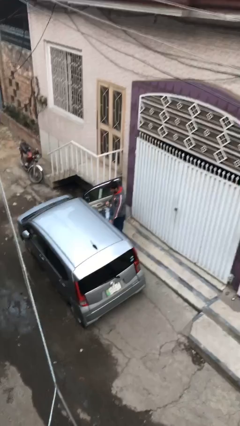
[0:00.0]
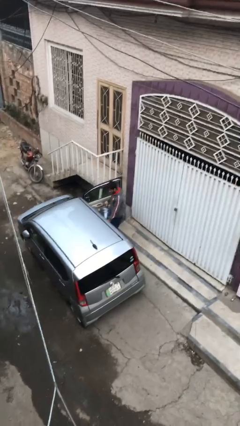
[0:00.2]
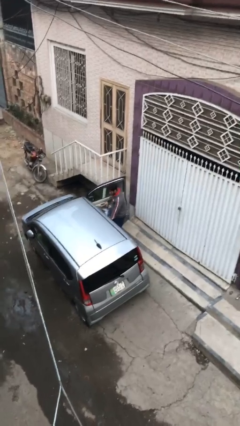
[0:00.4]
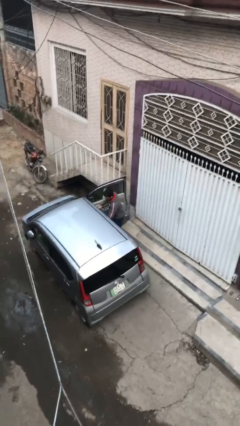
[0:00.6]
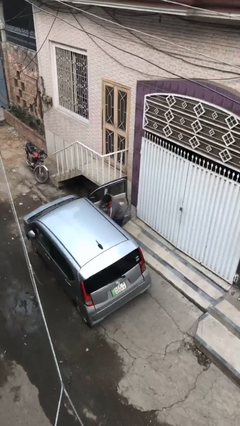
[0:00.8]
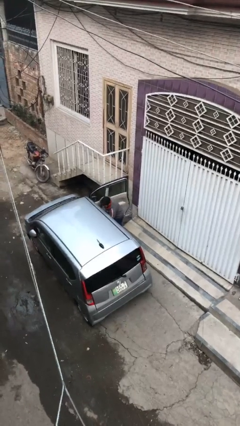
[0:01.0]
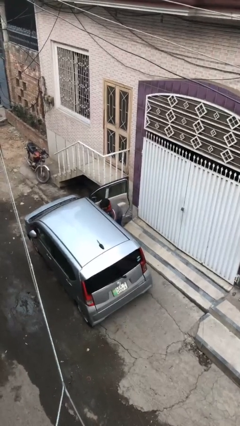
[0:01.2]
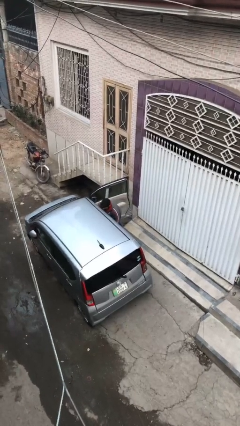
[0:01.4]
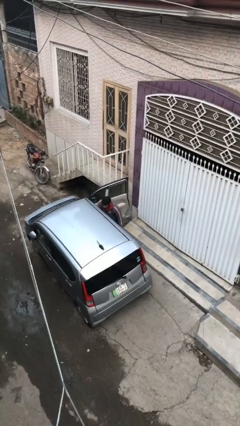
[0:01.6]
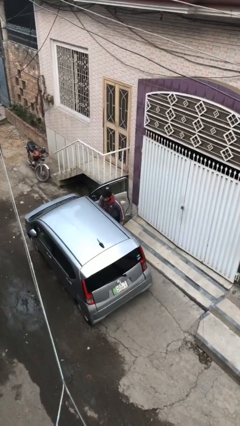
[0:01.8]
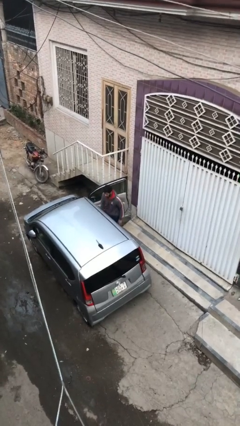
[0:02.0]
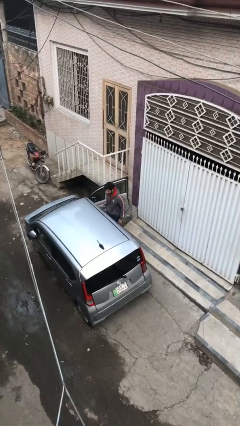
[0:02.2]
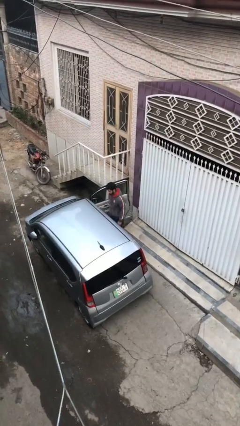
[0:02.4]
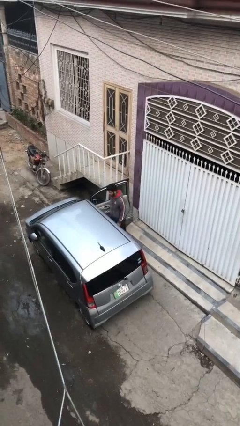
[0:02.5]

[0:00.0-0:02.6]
person loads car

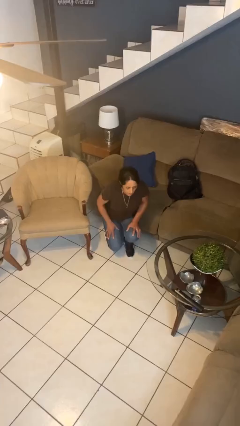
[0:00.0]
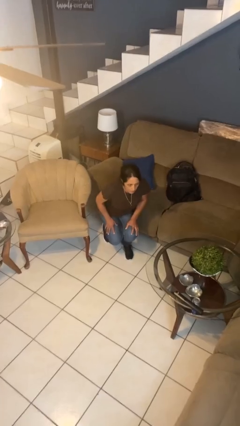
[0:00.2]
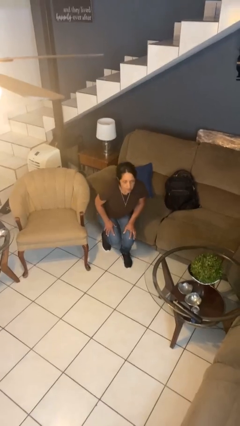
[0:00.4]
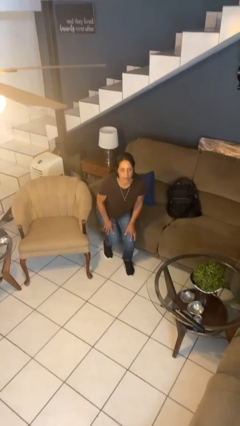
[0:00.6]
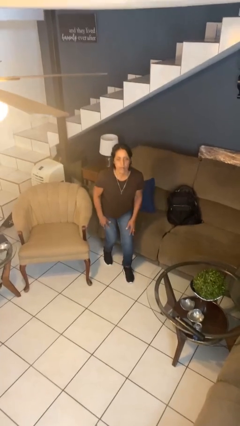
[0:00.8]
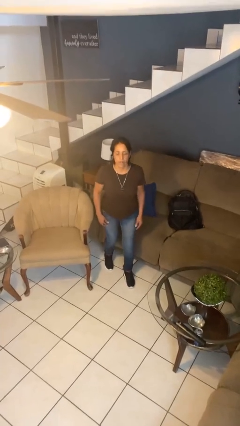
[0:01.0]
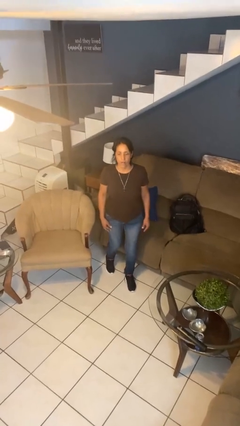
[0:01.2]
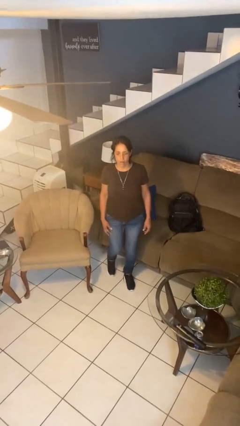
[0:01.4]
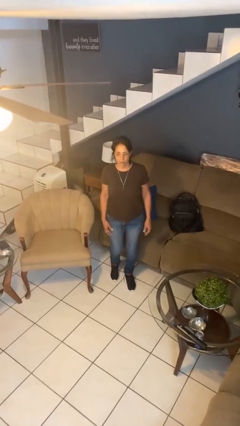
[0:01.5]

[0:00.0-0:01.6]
person stands up from floor

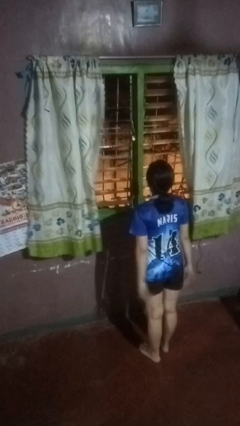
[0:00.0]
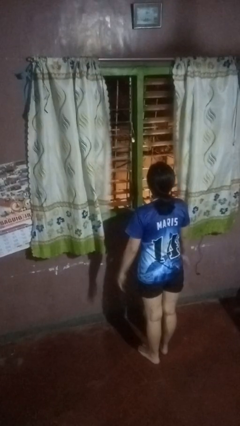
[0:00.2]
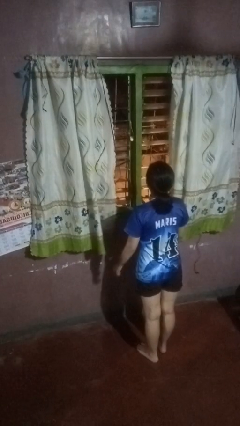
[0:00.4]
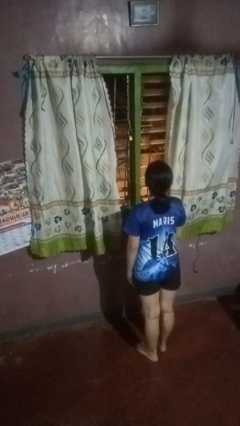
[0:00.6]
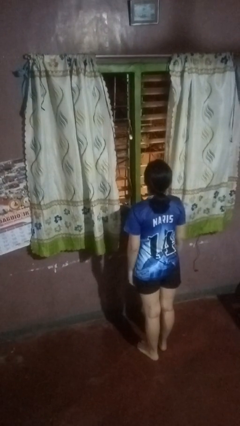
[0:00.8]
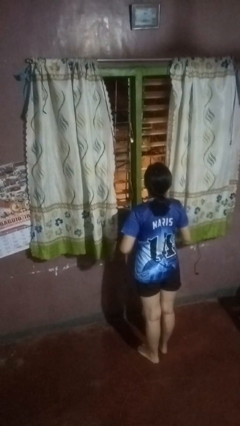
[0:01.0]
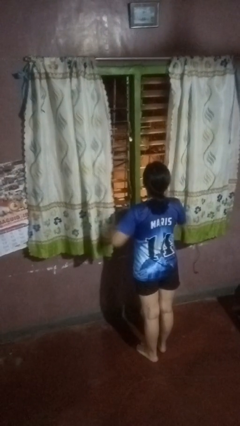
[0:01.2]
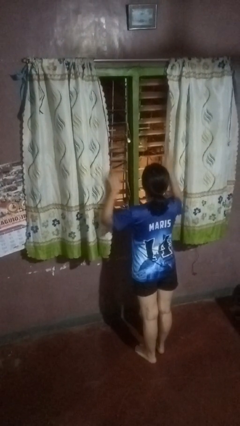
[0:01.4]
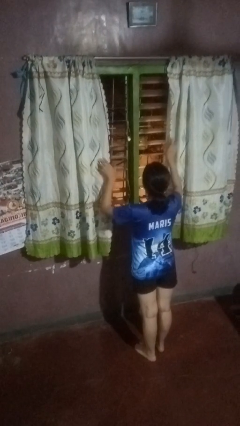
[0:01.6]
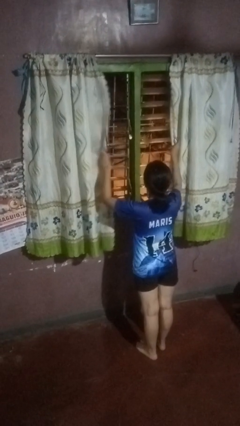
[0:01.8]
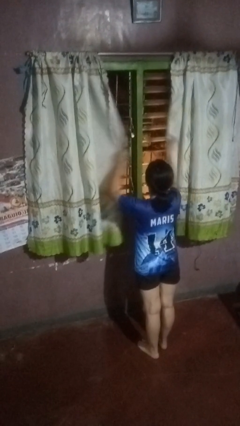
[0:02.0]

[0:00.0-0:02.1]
person closes curtains

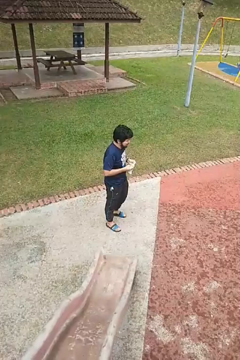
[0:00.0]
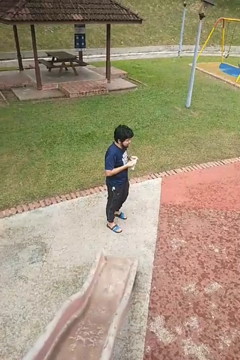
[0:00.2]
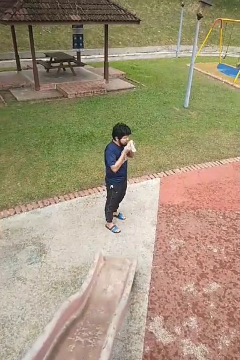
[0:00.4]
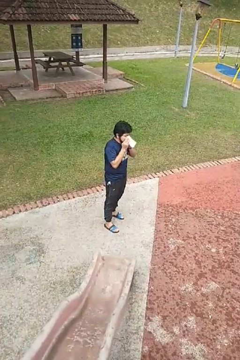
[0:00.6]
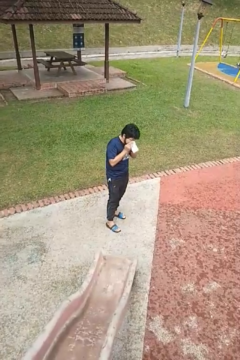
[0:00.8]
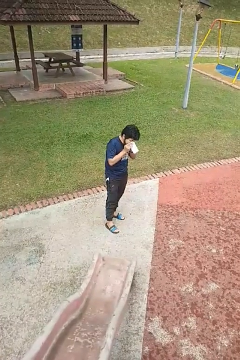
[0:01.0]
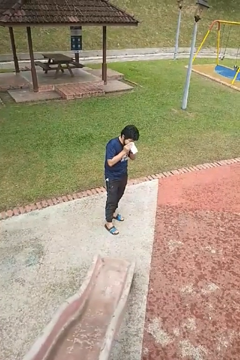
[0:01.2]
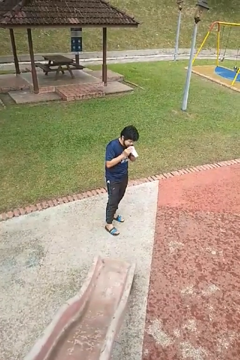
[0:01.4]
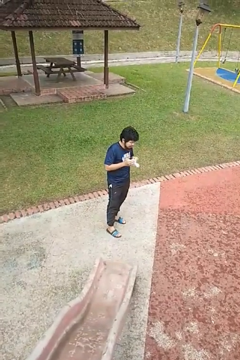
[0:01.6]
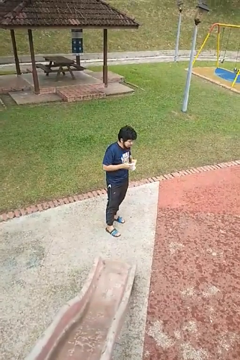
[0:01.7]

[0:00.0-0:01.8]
person blows nose

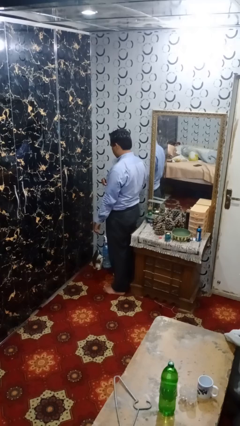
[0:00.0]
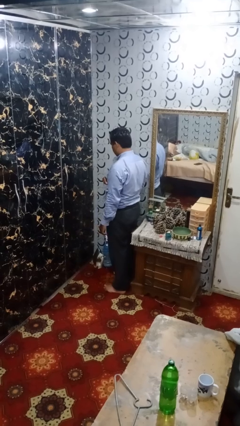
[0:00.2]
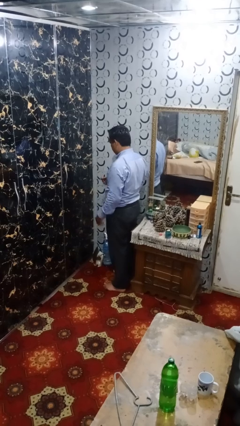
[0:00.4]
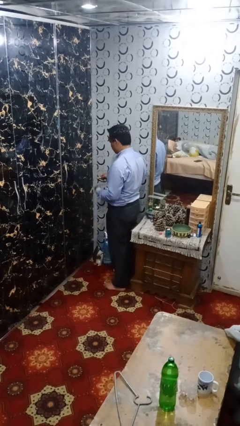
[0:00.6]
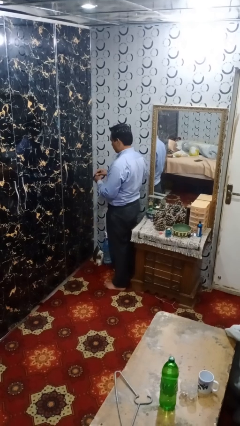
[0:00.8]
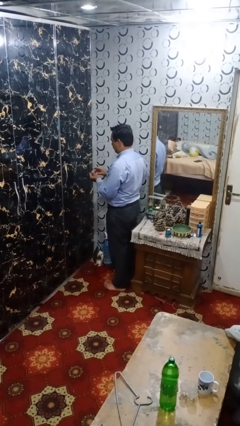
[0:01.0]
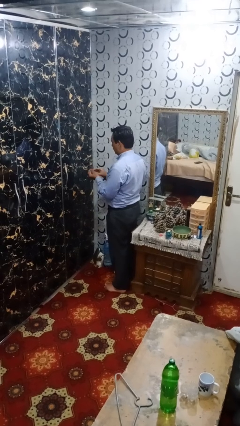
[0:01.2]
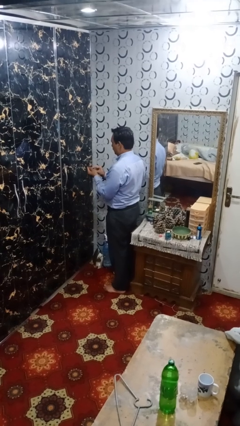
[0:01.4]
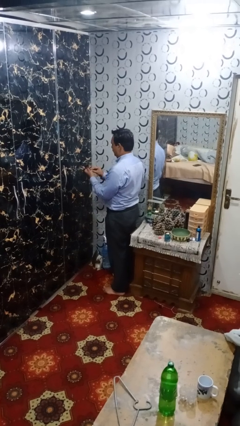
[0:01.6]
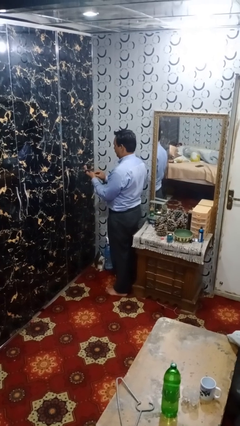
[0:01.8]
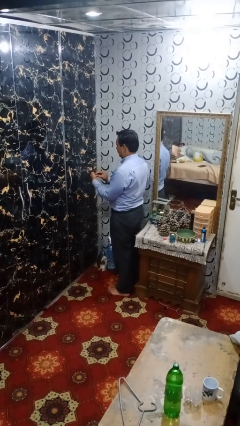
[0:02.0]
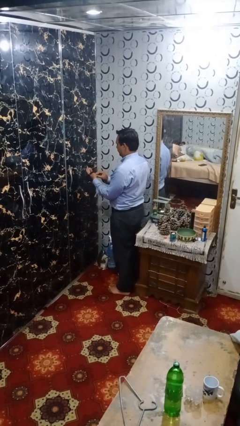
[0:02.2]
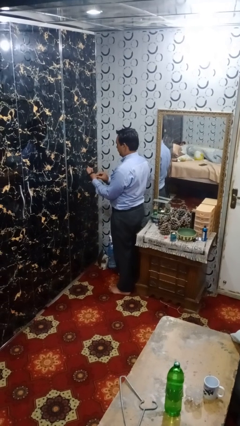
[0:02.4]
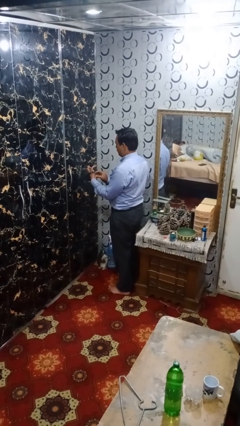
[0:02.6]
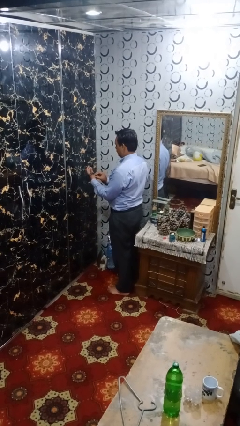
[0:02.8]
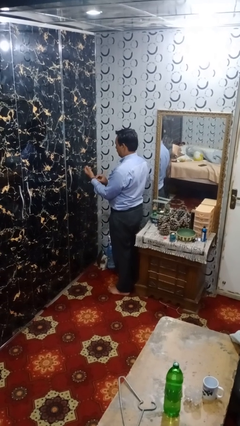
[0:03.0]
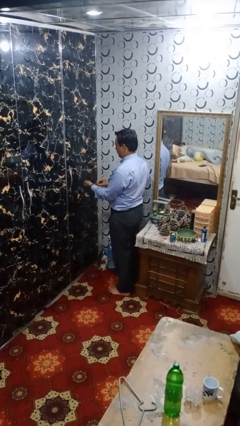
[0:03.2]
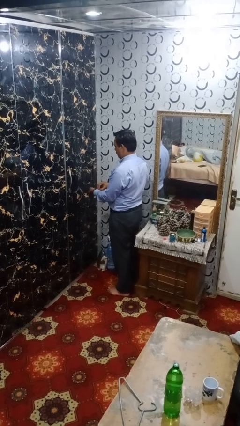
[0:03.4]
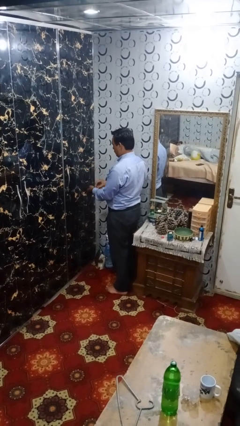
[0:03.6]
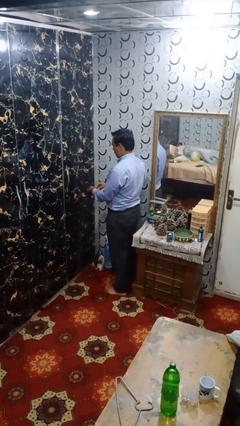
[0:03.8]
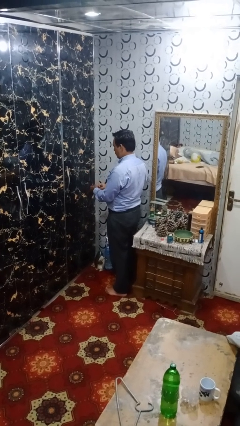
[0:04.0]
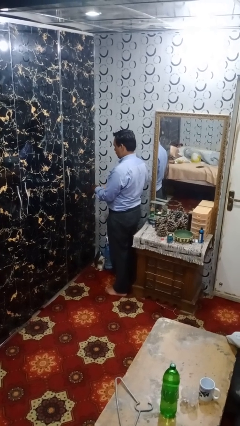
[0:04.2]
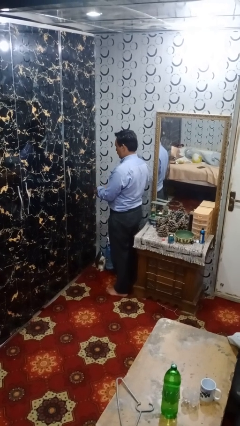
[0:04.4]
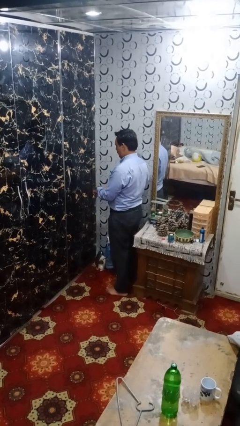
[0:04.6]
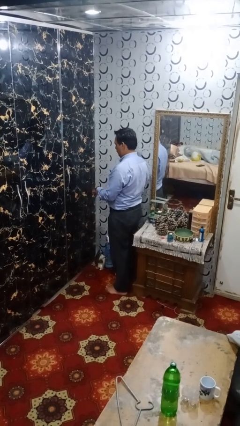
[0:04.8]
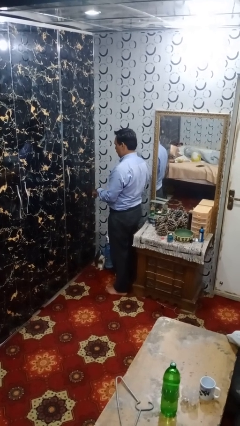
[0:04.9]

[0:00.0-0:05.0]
person puts on wristwatch

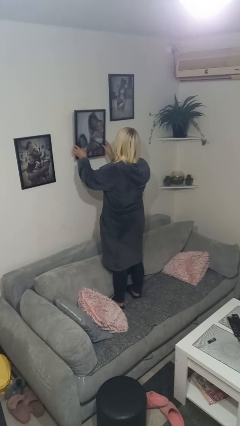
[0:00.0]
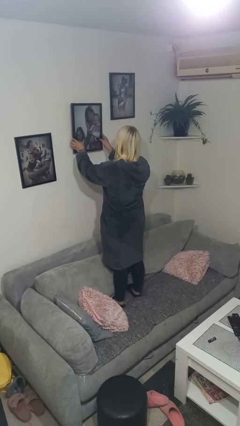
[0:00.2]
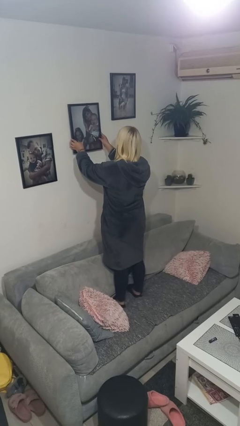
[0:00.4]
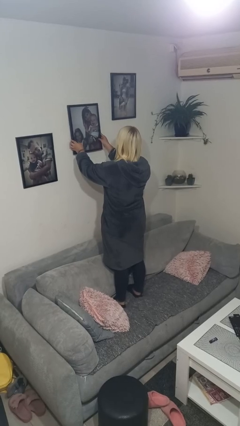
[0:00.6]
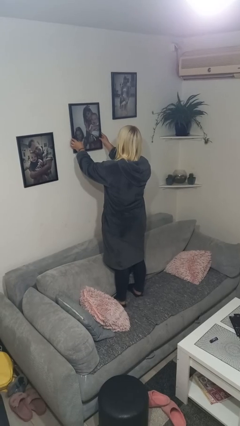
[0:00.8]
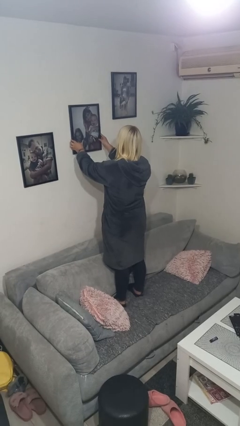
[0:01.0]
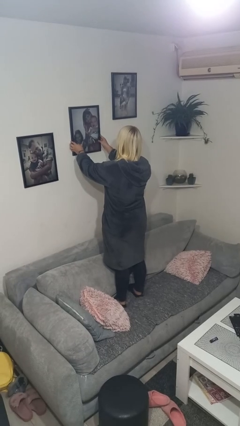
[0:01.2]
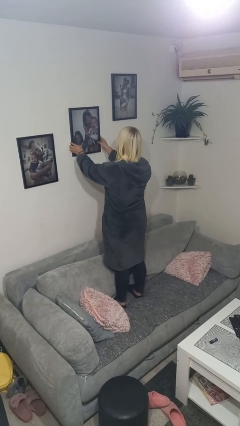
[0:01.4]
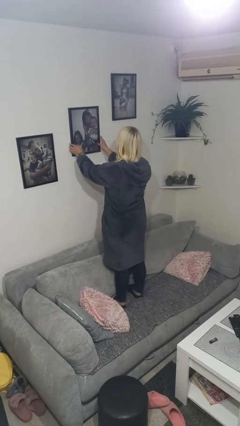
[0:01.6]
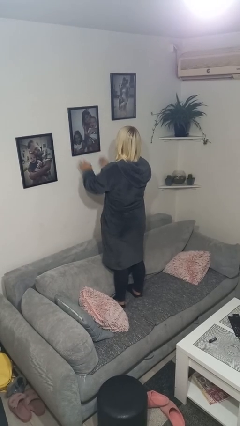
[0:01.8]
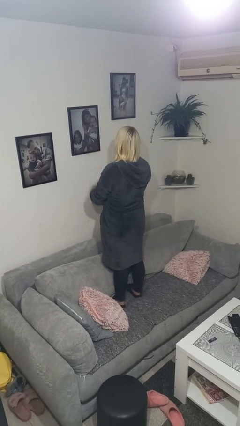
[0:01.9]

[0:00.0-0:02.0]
person puts up picture frame

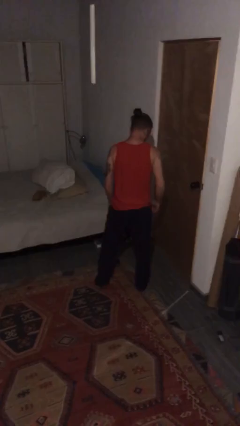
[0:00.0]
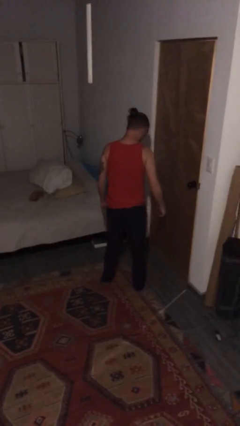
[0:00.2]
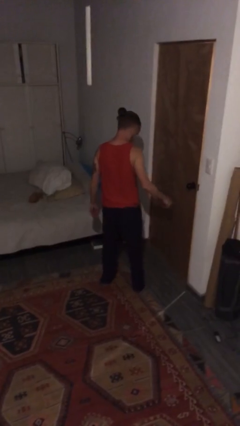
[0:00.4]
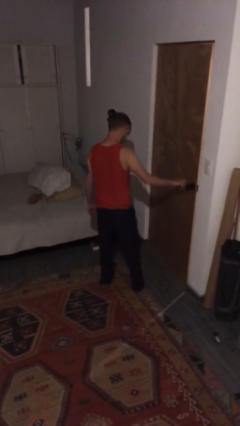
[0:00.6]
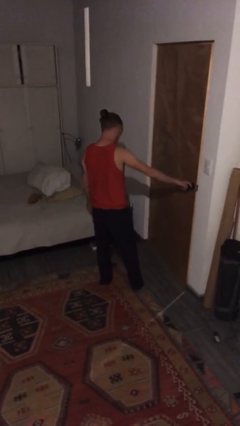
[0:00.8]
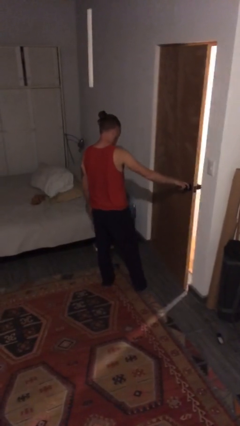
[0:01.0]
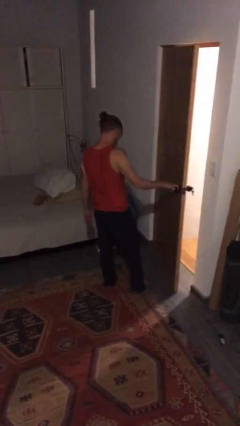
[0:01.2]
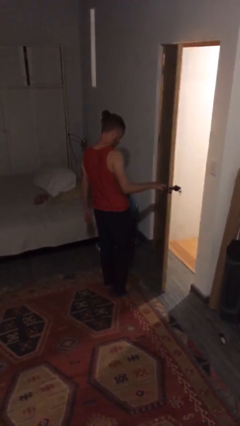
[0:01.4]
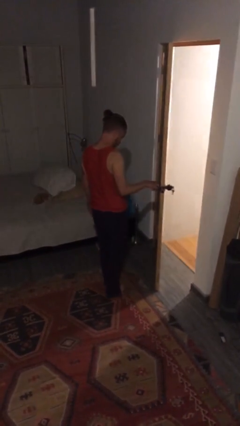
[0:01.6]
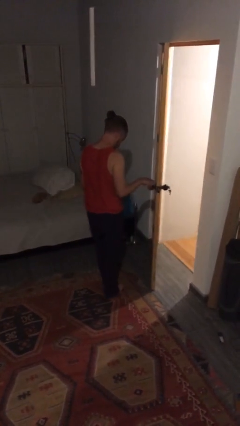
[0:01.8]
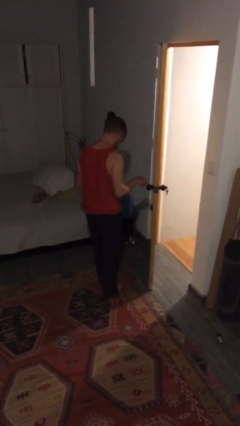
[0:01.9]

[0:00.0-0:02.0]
person opens facility door
